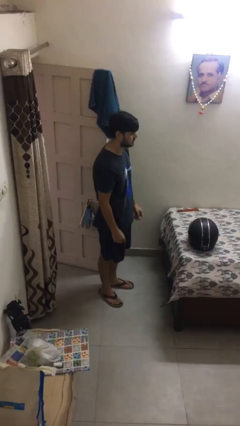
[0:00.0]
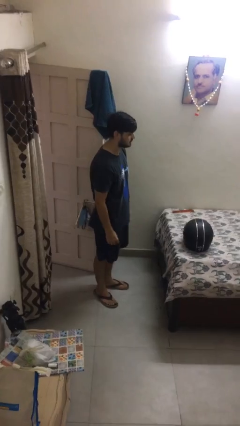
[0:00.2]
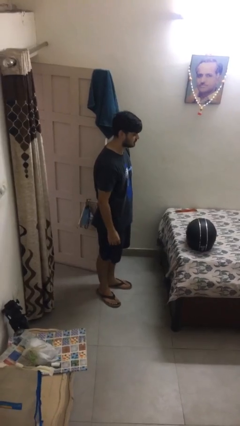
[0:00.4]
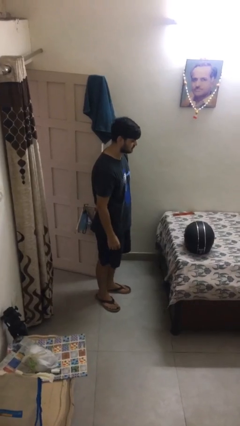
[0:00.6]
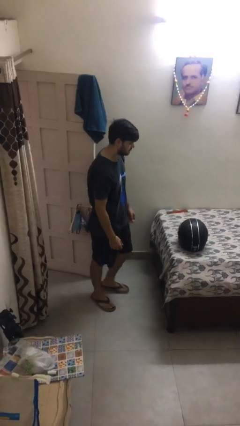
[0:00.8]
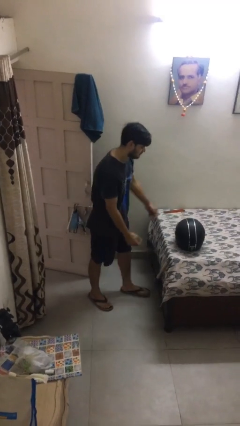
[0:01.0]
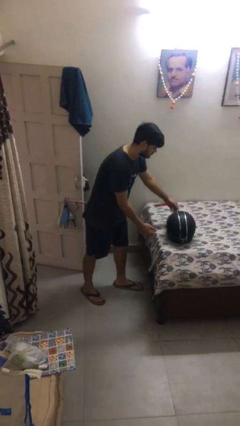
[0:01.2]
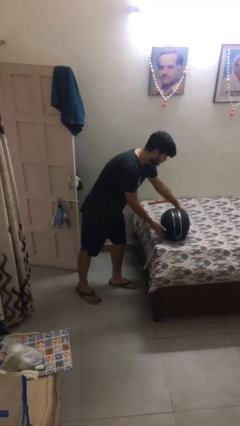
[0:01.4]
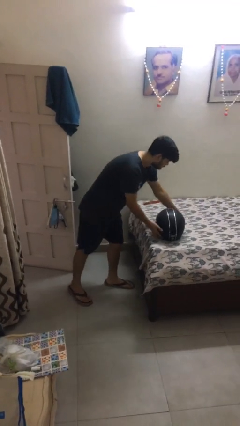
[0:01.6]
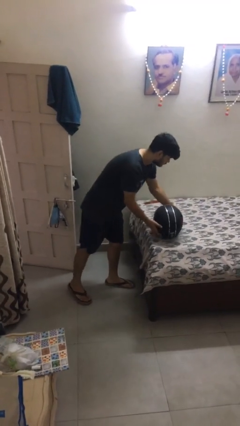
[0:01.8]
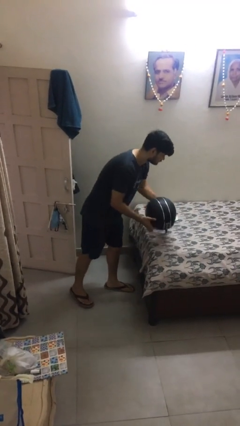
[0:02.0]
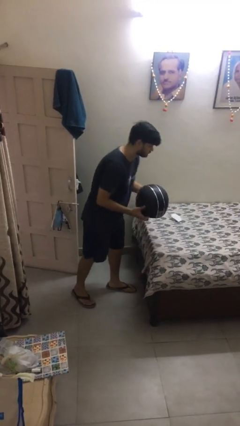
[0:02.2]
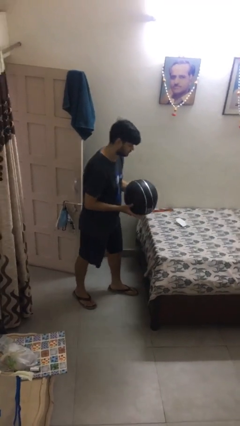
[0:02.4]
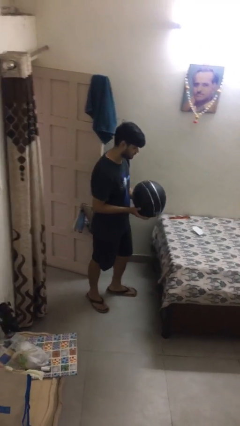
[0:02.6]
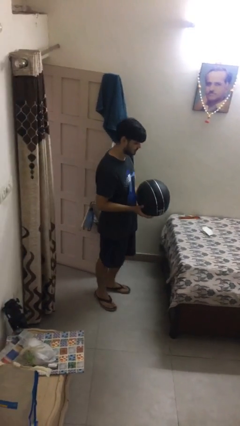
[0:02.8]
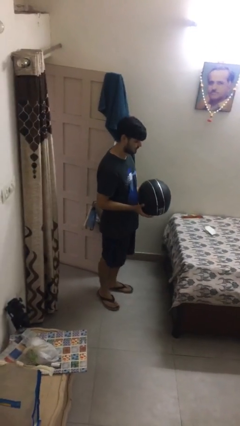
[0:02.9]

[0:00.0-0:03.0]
person picks up object from bed

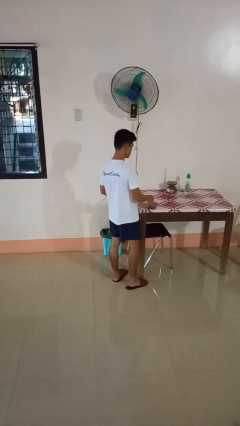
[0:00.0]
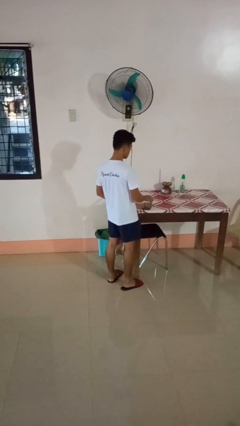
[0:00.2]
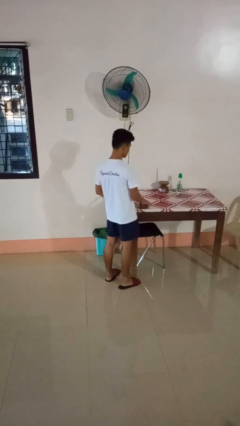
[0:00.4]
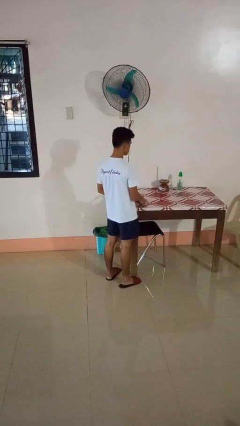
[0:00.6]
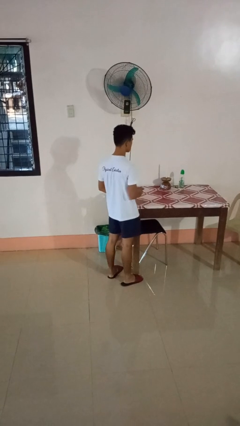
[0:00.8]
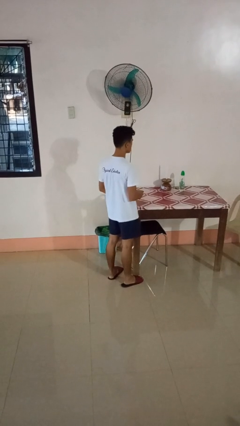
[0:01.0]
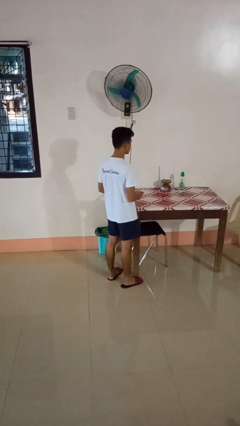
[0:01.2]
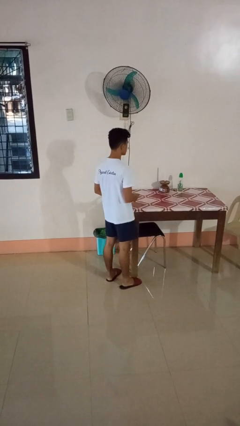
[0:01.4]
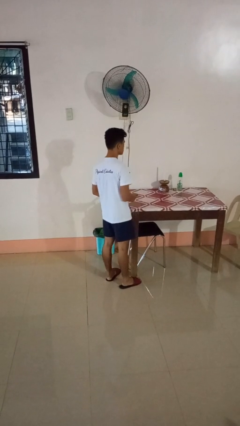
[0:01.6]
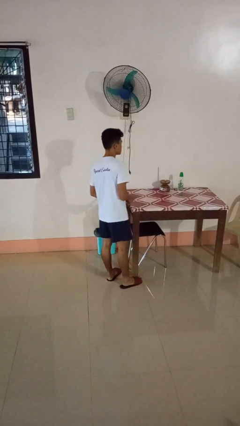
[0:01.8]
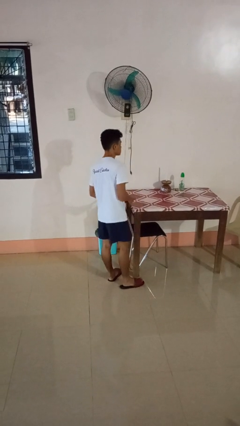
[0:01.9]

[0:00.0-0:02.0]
person picks up object from table

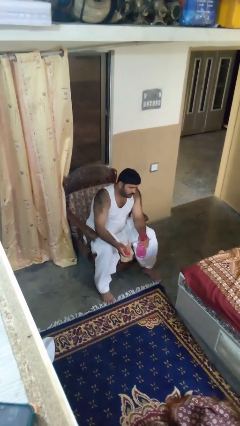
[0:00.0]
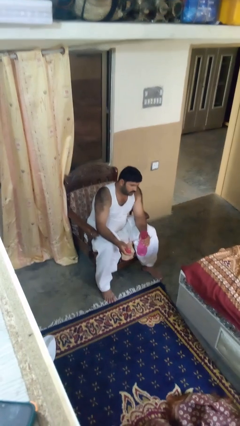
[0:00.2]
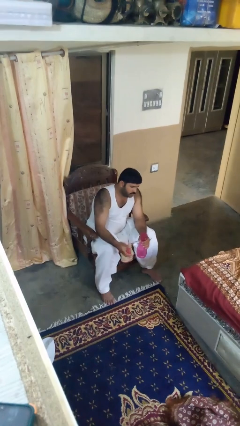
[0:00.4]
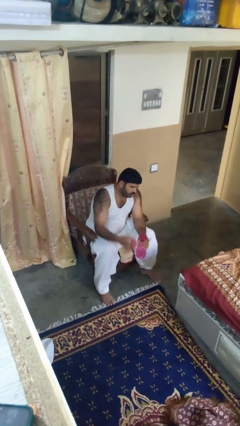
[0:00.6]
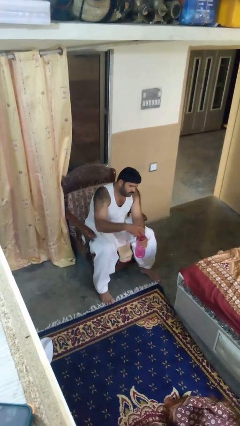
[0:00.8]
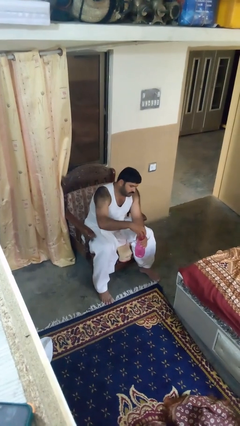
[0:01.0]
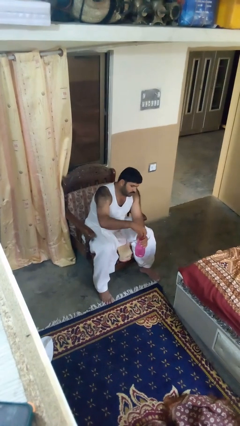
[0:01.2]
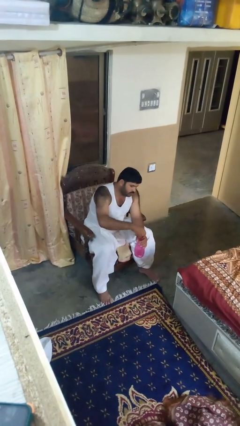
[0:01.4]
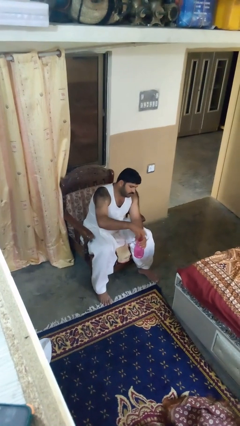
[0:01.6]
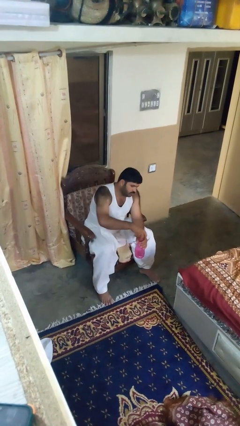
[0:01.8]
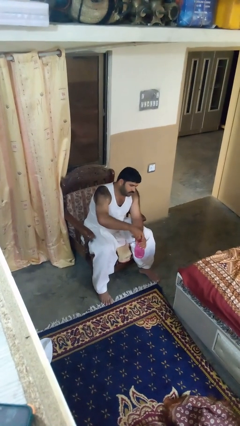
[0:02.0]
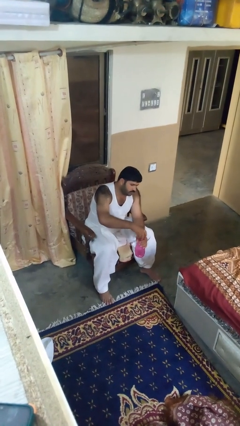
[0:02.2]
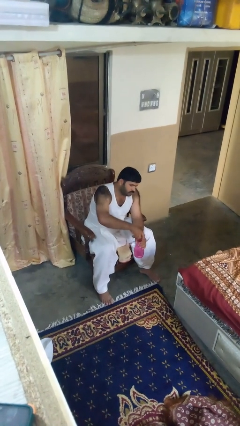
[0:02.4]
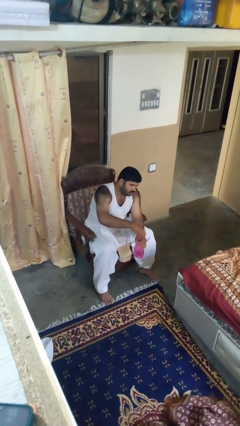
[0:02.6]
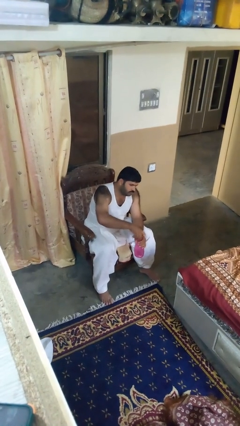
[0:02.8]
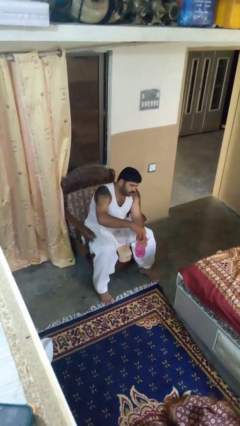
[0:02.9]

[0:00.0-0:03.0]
person screws lid to bottle

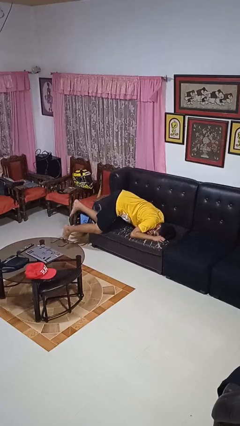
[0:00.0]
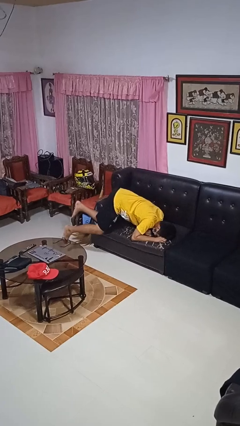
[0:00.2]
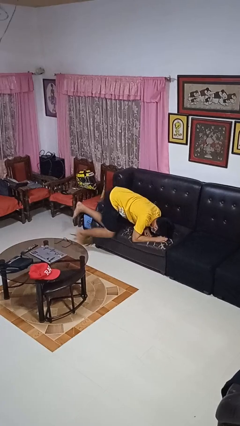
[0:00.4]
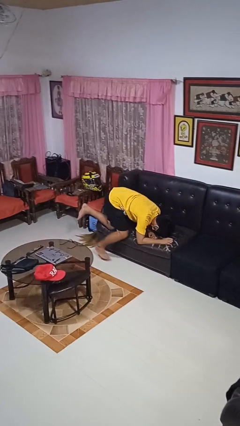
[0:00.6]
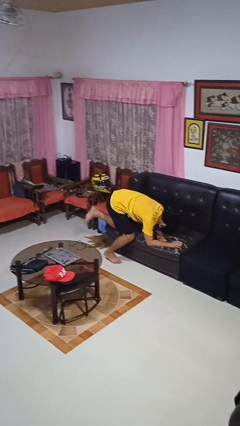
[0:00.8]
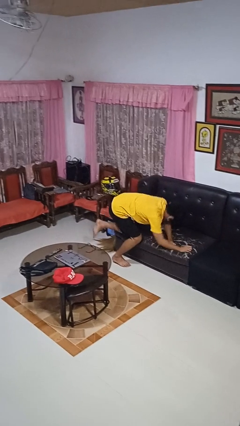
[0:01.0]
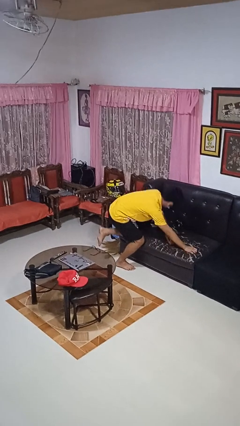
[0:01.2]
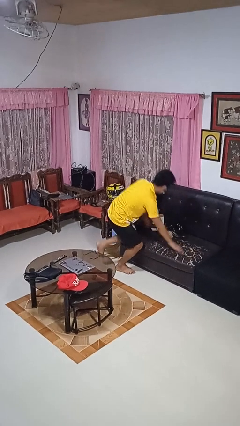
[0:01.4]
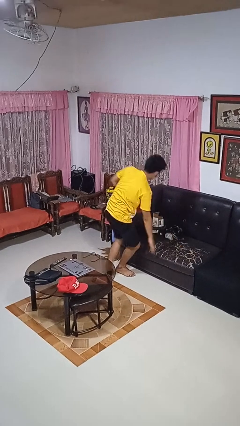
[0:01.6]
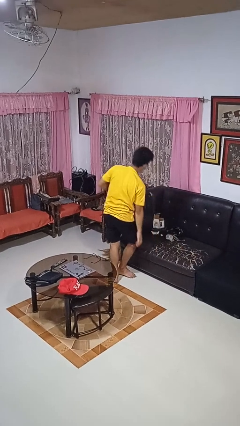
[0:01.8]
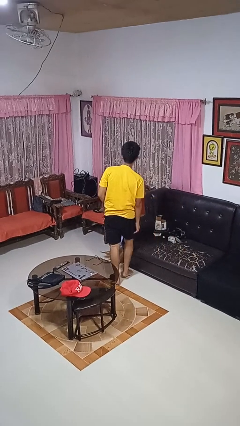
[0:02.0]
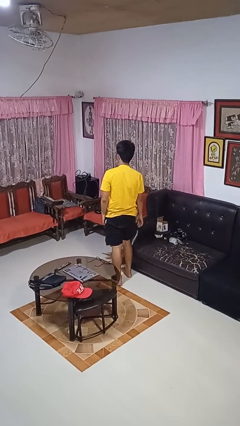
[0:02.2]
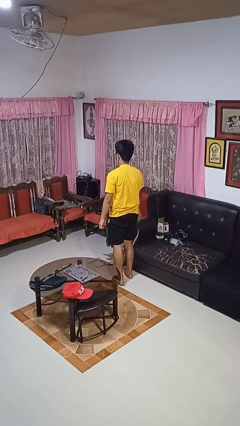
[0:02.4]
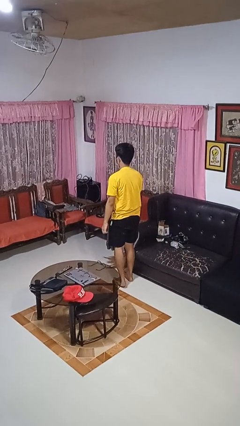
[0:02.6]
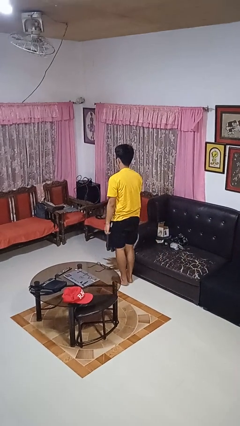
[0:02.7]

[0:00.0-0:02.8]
person stands up

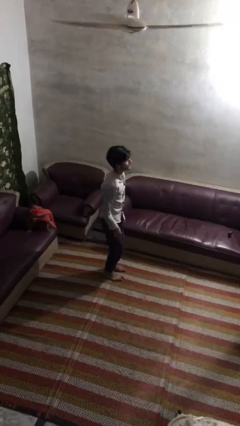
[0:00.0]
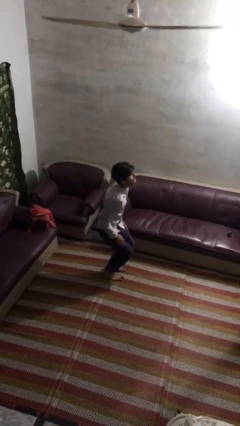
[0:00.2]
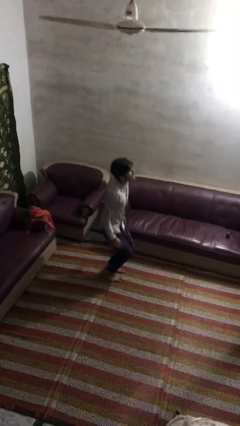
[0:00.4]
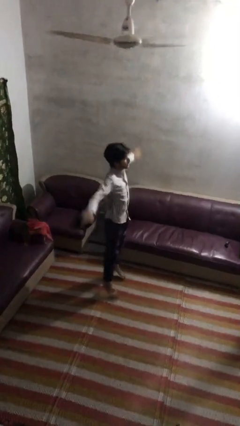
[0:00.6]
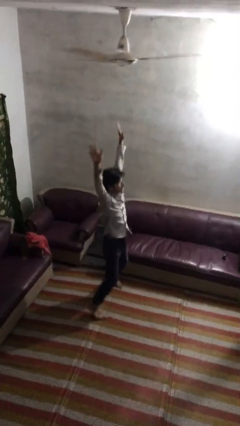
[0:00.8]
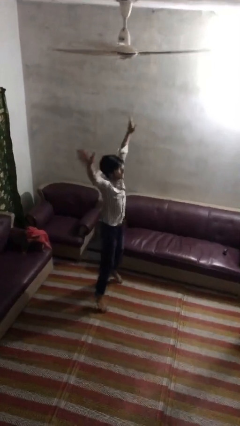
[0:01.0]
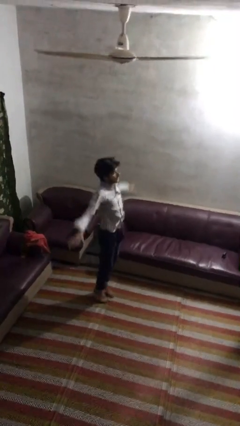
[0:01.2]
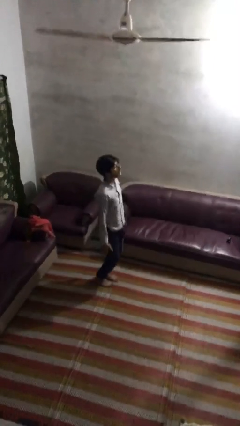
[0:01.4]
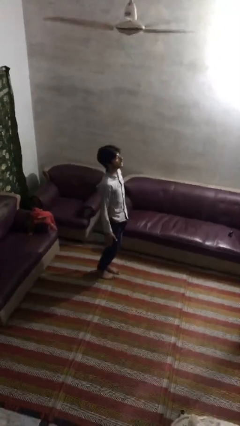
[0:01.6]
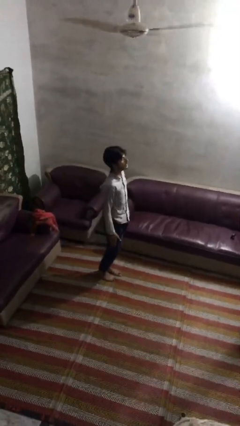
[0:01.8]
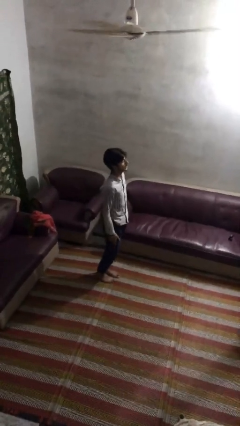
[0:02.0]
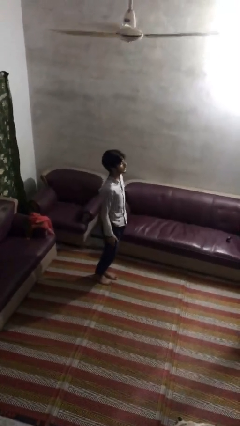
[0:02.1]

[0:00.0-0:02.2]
person exercises with jumping jacks

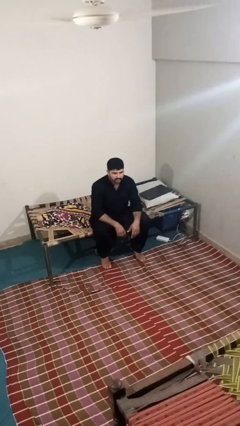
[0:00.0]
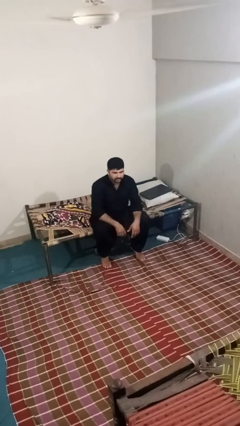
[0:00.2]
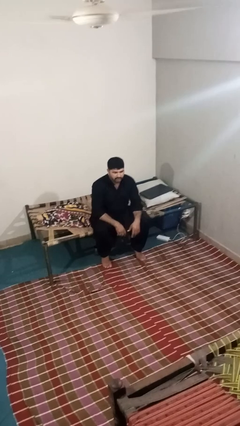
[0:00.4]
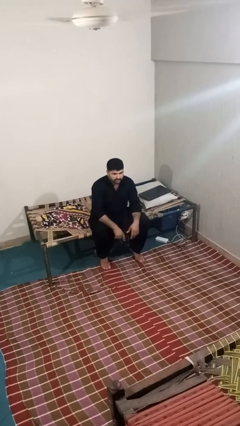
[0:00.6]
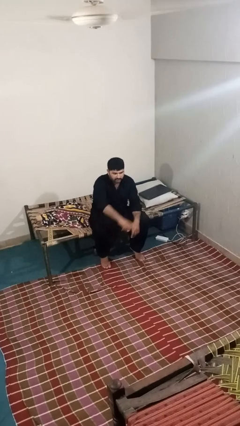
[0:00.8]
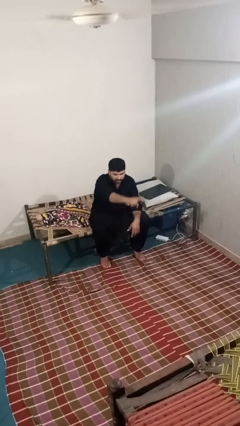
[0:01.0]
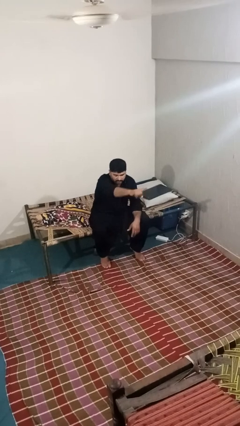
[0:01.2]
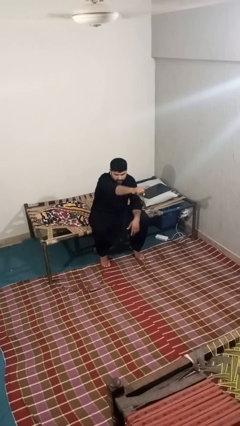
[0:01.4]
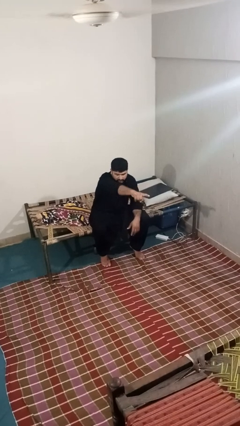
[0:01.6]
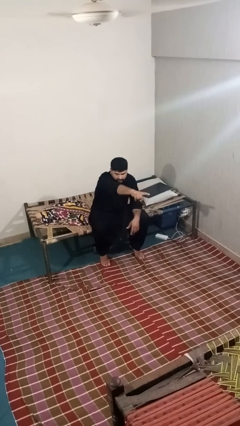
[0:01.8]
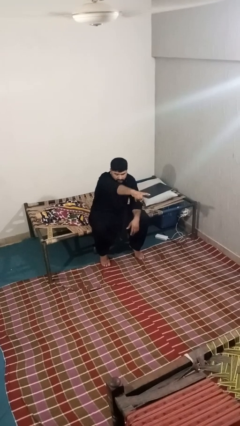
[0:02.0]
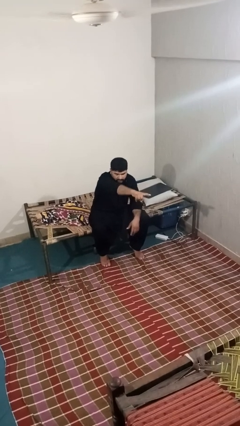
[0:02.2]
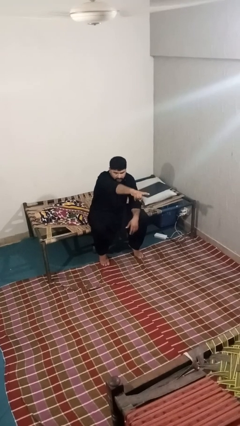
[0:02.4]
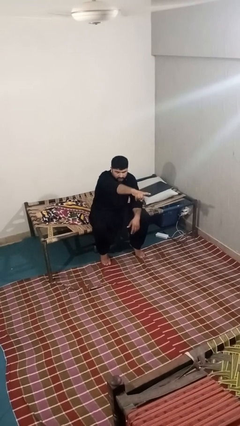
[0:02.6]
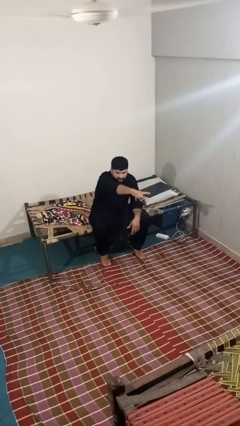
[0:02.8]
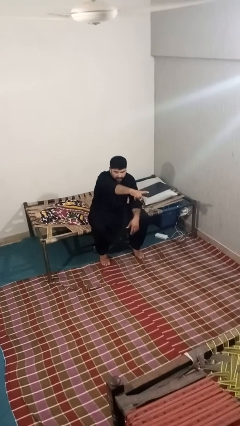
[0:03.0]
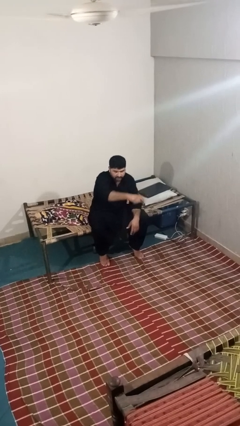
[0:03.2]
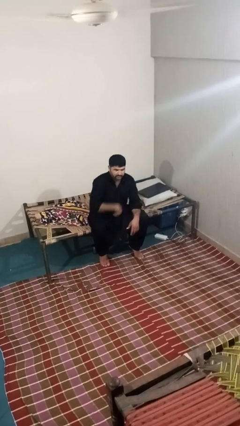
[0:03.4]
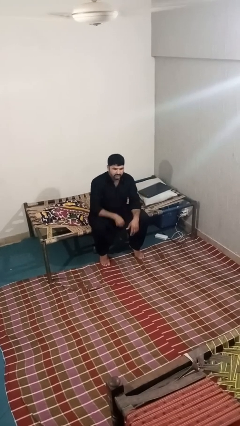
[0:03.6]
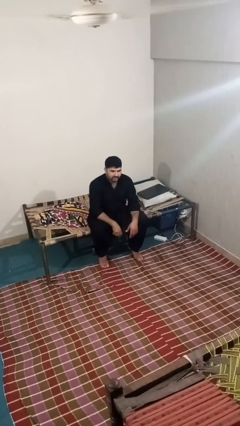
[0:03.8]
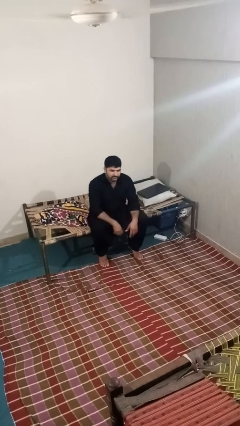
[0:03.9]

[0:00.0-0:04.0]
person points at person

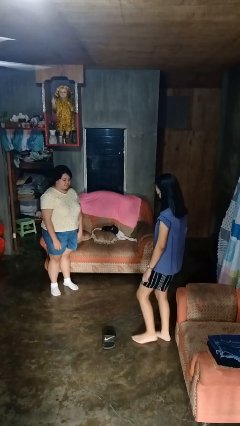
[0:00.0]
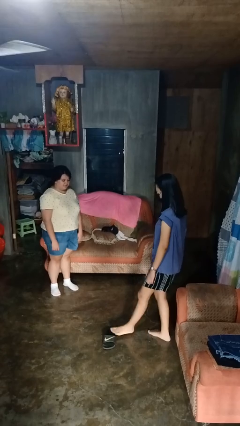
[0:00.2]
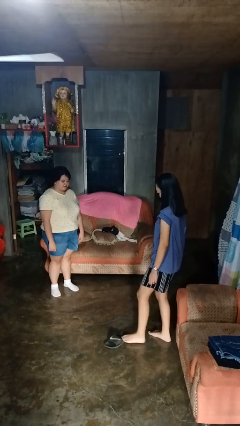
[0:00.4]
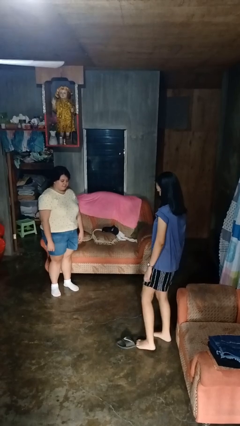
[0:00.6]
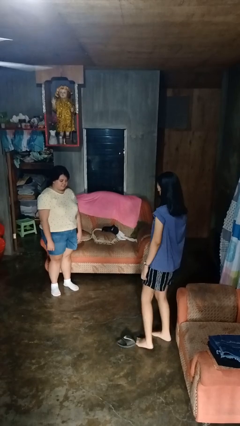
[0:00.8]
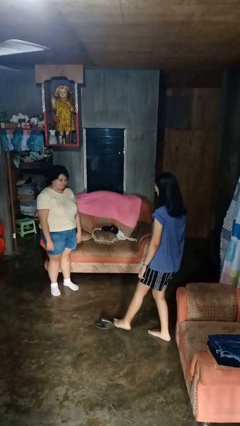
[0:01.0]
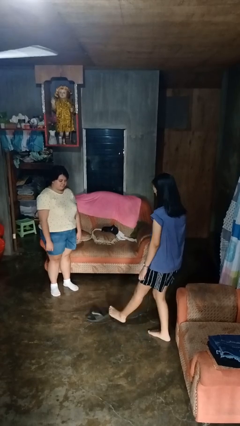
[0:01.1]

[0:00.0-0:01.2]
person kicks object to person
